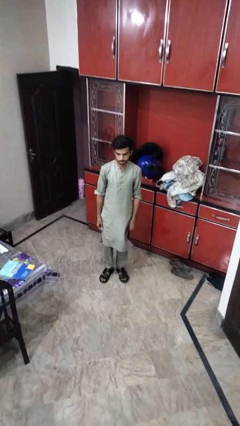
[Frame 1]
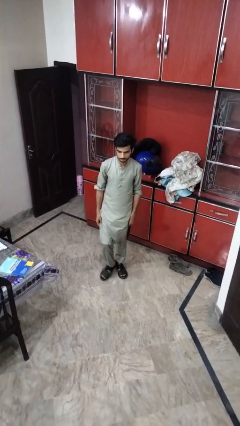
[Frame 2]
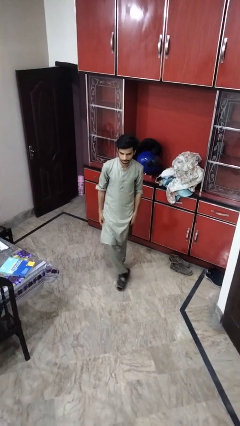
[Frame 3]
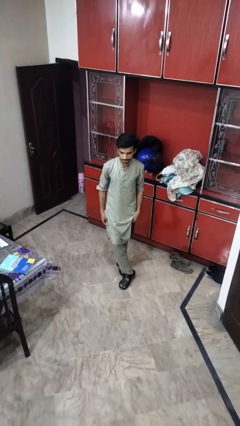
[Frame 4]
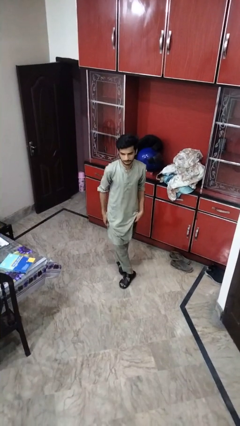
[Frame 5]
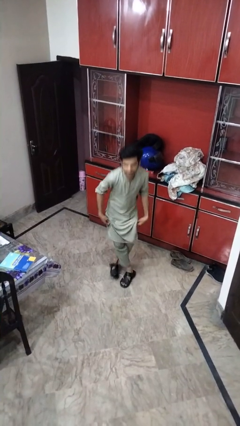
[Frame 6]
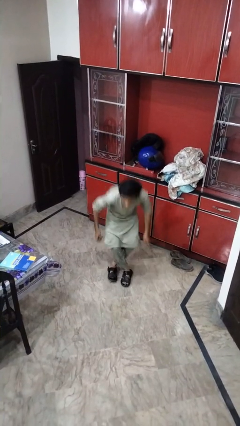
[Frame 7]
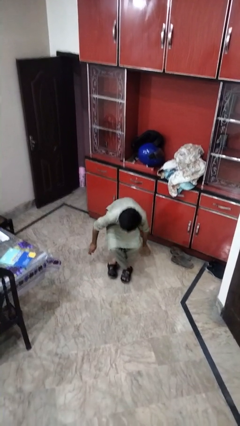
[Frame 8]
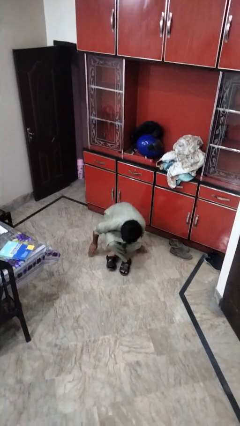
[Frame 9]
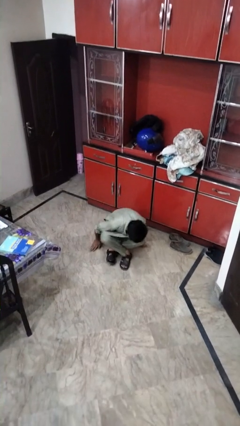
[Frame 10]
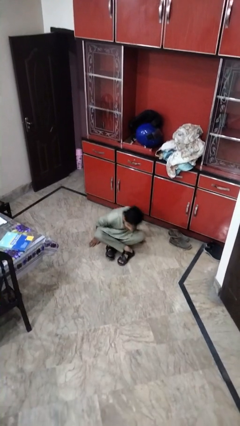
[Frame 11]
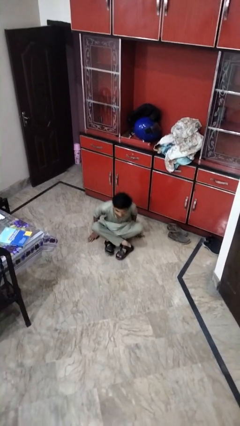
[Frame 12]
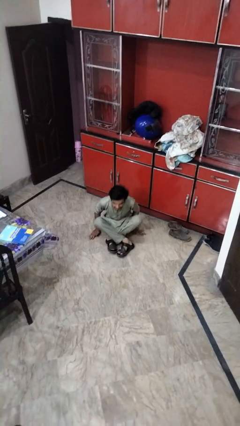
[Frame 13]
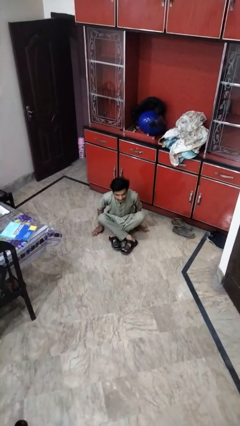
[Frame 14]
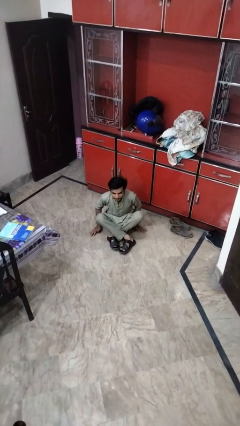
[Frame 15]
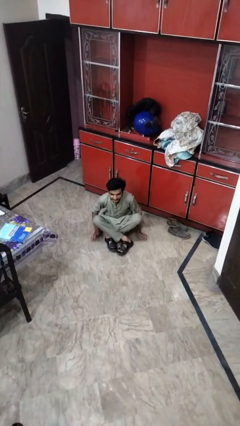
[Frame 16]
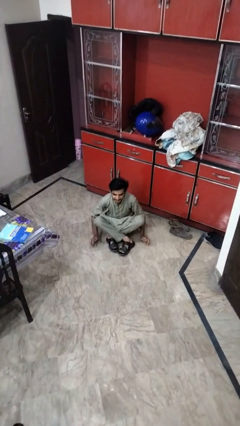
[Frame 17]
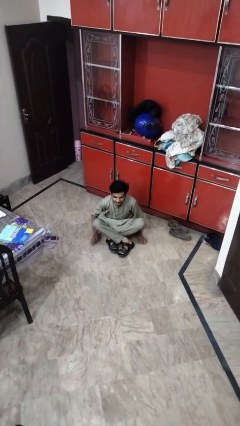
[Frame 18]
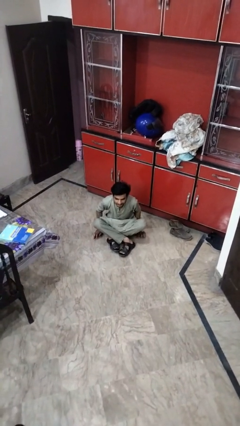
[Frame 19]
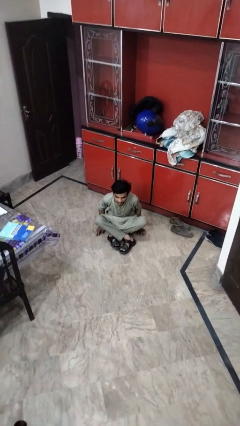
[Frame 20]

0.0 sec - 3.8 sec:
person sits crisscross

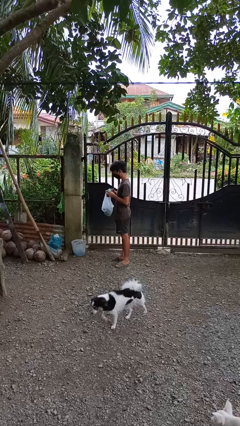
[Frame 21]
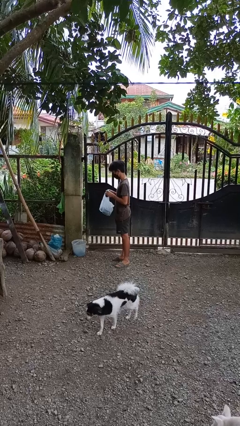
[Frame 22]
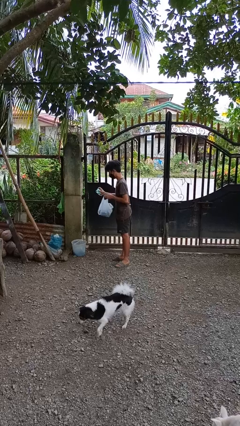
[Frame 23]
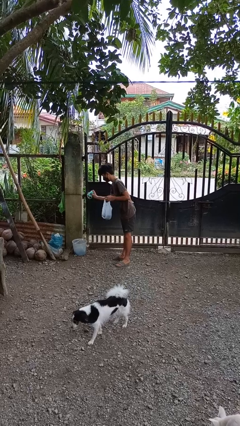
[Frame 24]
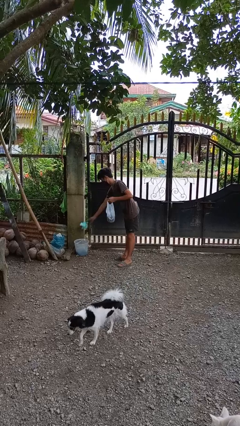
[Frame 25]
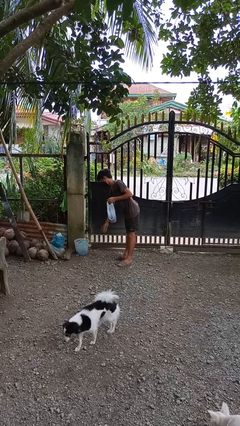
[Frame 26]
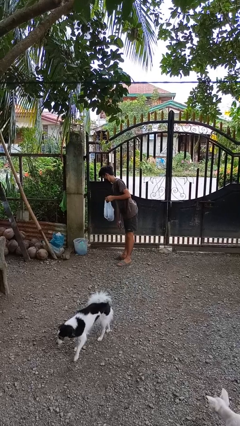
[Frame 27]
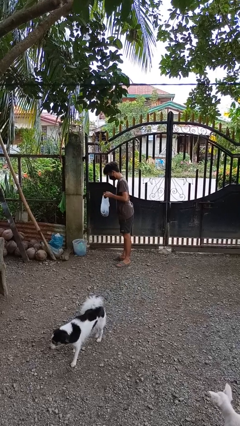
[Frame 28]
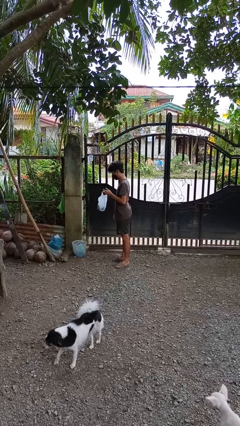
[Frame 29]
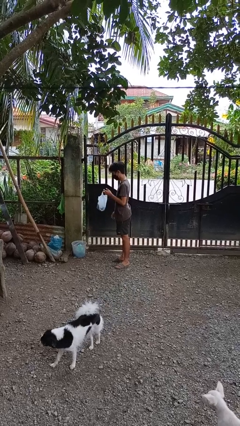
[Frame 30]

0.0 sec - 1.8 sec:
person discards trash

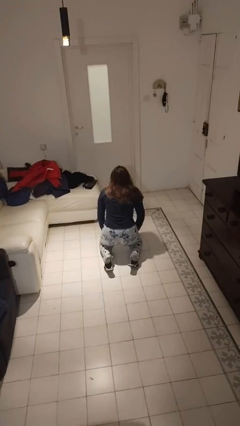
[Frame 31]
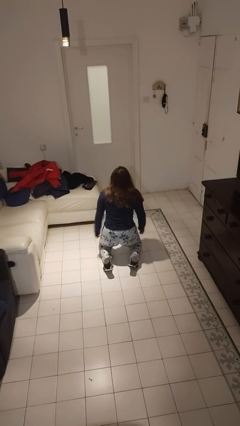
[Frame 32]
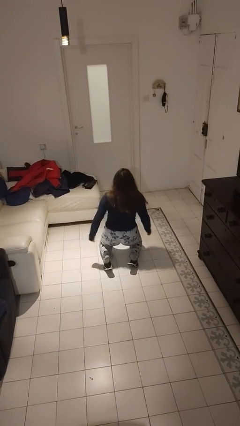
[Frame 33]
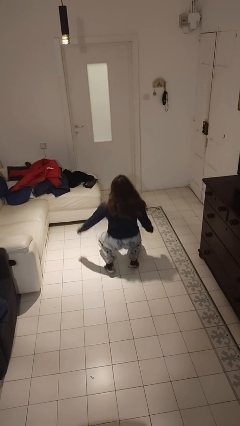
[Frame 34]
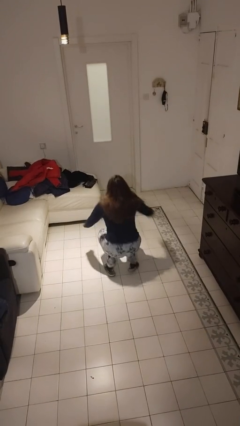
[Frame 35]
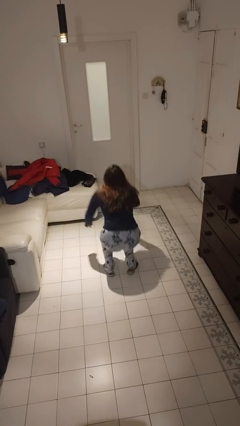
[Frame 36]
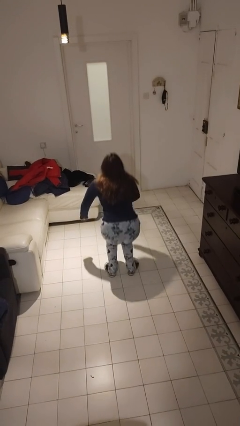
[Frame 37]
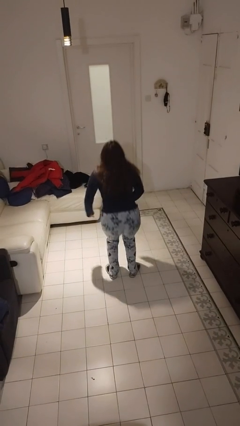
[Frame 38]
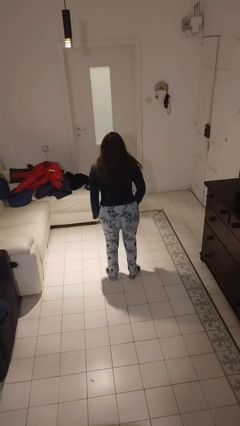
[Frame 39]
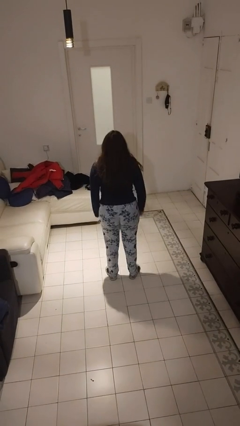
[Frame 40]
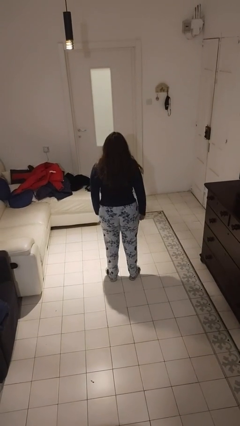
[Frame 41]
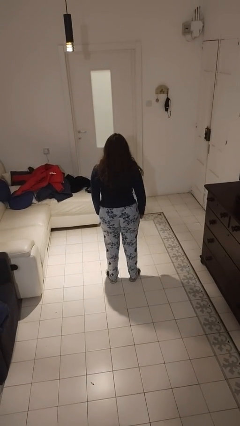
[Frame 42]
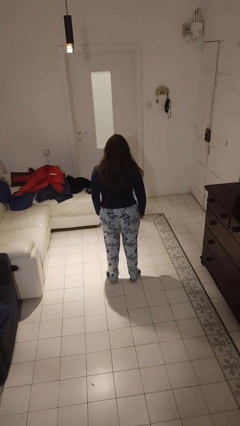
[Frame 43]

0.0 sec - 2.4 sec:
person stands up from floor

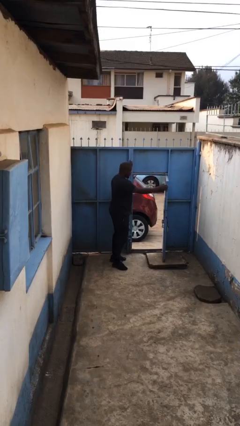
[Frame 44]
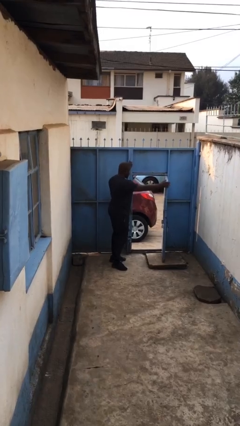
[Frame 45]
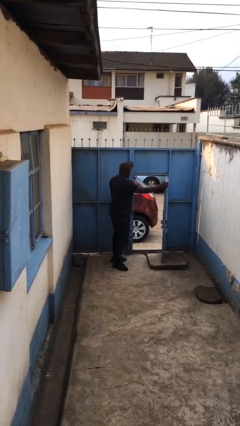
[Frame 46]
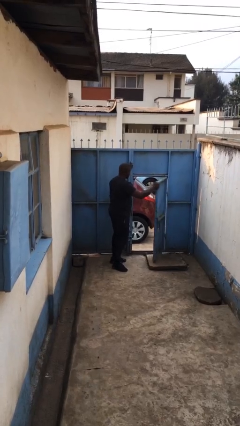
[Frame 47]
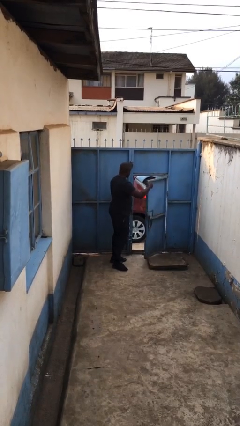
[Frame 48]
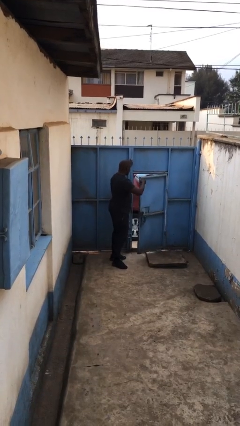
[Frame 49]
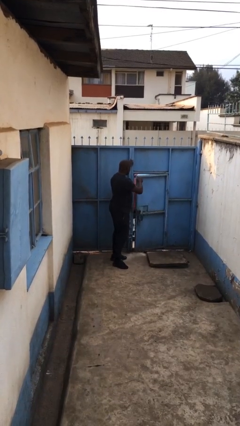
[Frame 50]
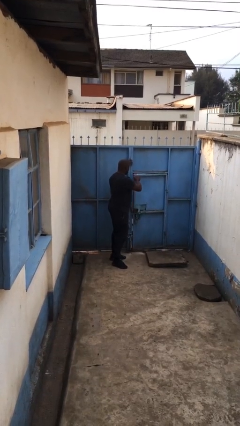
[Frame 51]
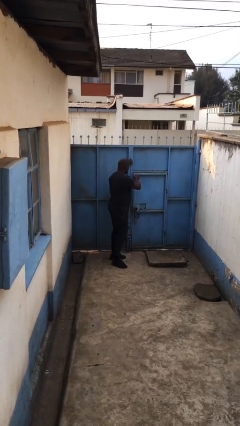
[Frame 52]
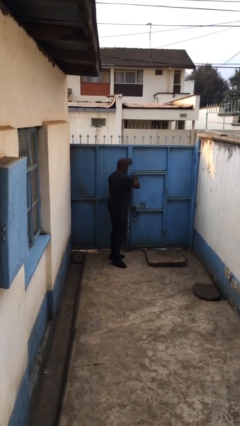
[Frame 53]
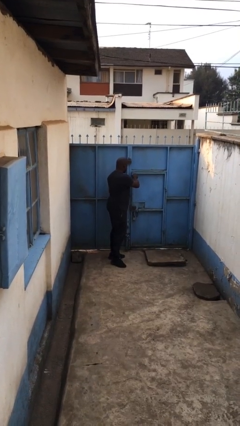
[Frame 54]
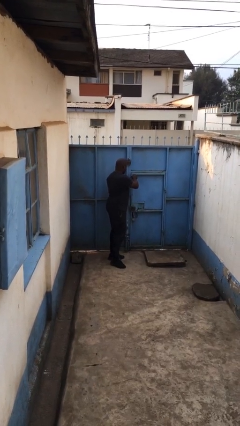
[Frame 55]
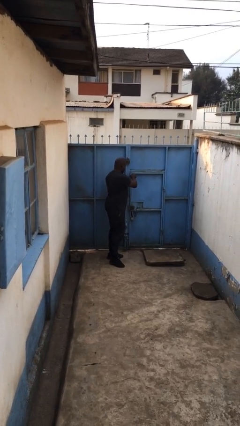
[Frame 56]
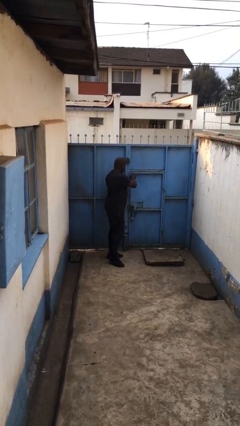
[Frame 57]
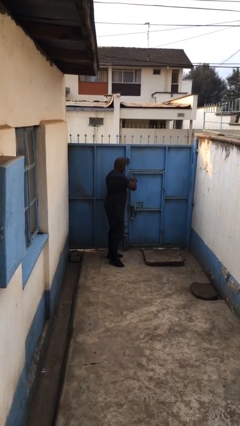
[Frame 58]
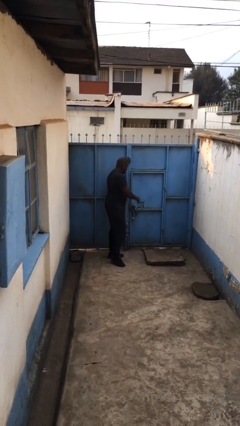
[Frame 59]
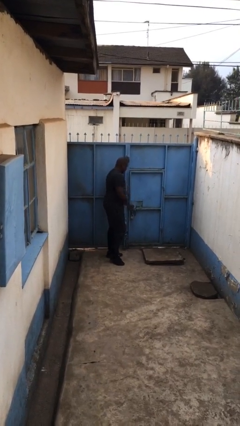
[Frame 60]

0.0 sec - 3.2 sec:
person closes gate

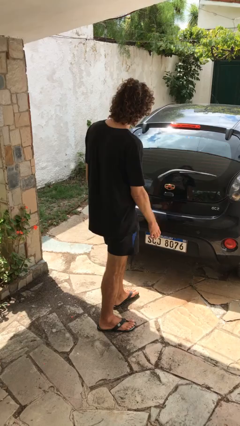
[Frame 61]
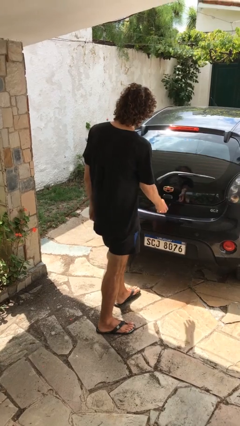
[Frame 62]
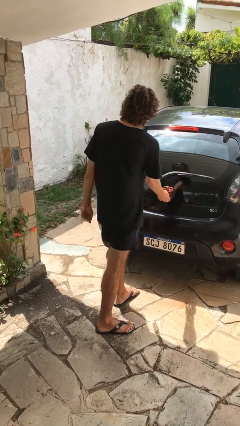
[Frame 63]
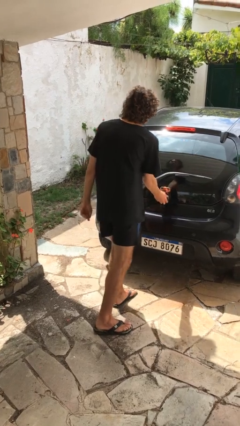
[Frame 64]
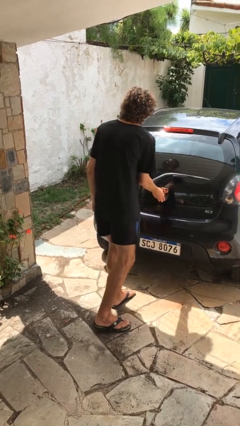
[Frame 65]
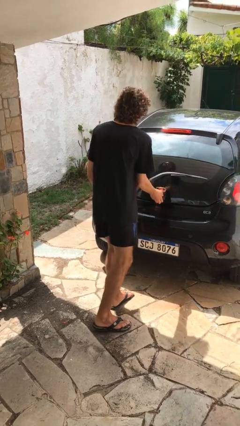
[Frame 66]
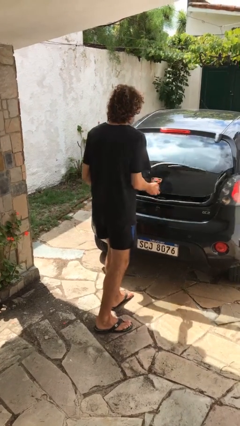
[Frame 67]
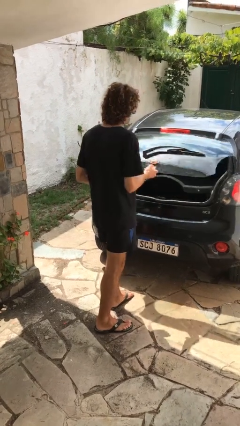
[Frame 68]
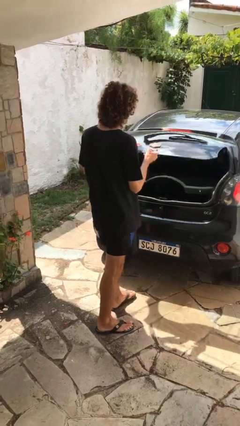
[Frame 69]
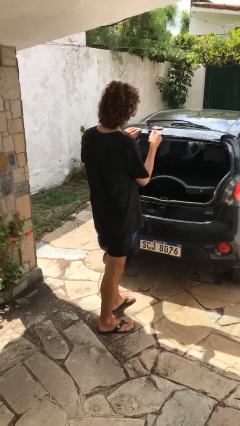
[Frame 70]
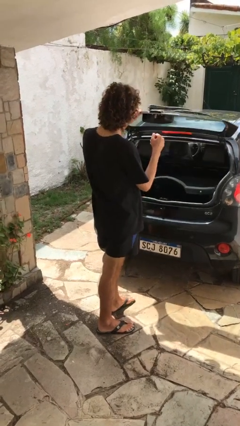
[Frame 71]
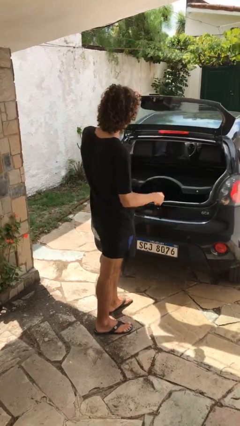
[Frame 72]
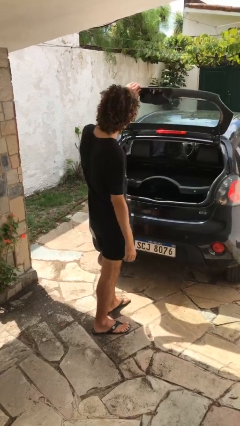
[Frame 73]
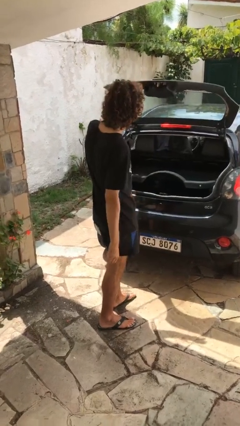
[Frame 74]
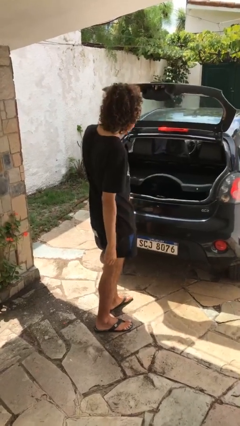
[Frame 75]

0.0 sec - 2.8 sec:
person opens car trunk

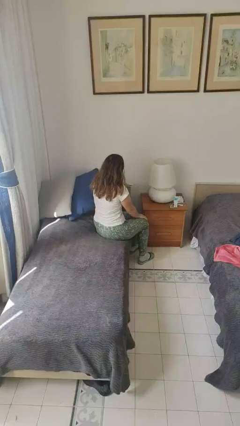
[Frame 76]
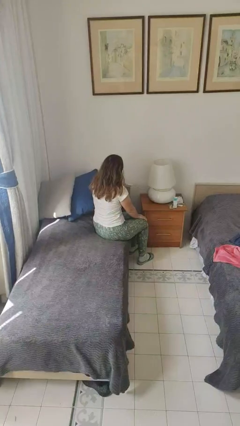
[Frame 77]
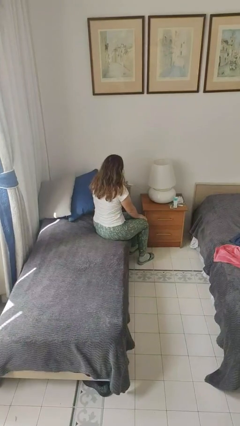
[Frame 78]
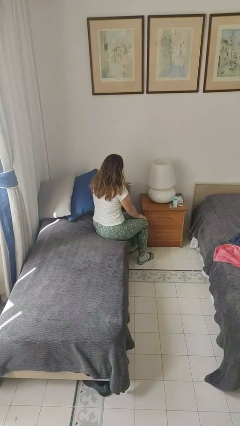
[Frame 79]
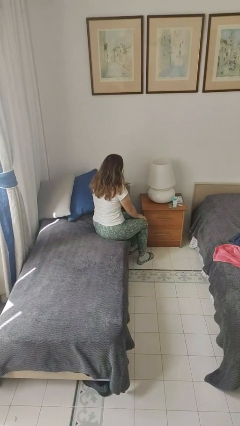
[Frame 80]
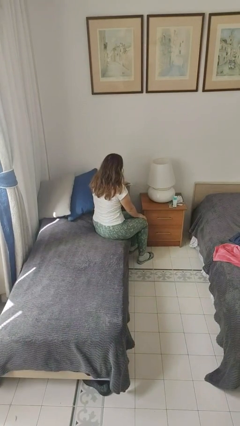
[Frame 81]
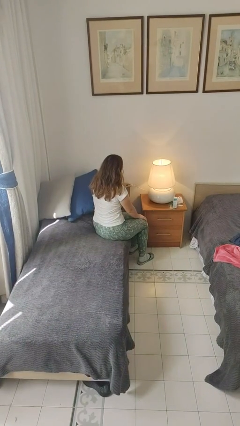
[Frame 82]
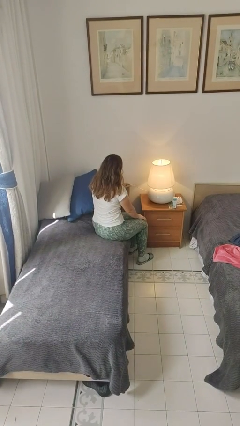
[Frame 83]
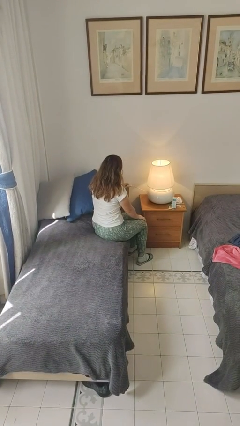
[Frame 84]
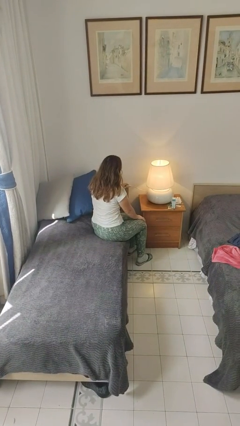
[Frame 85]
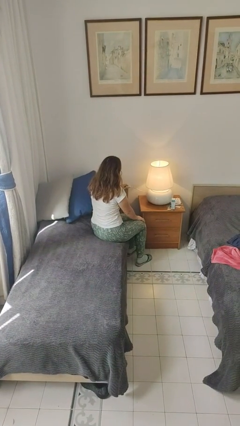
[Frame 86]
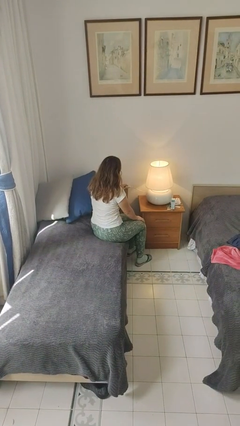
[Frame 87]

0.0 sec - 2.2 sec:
person turns on lamp

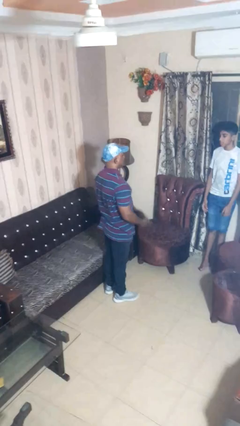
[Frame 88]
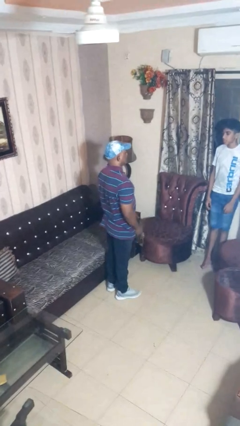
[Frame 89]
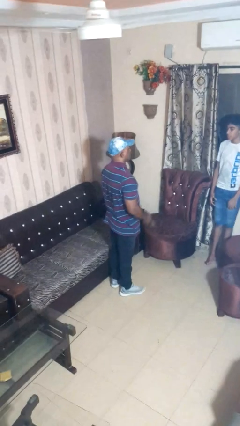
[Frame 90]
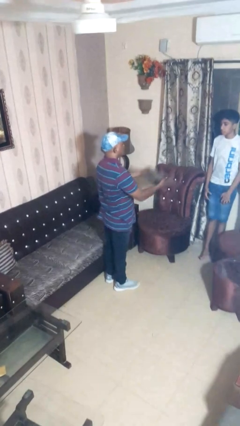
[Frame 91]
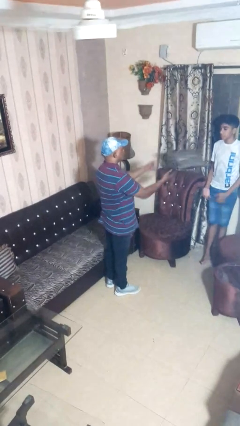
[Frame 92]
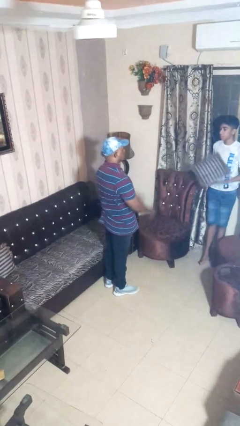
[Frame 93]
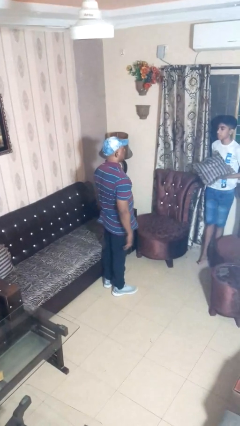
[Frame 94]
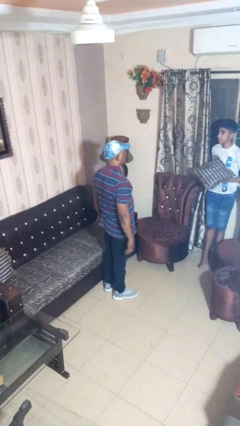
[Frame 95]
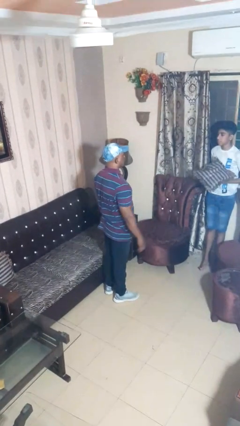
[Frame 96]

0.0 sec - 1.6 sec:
person throws object to person
